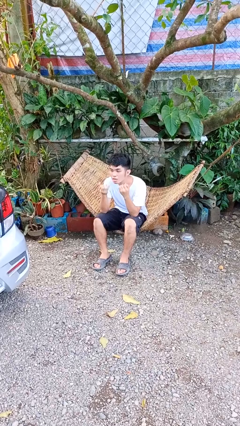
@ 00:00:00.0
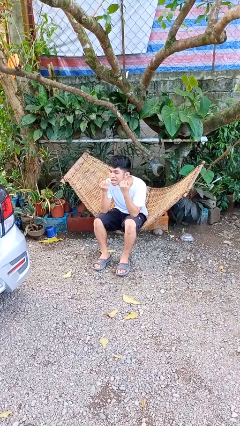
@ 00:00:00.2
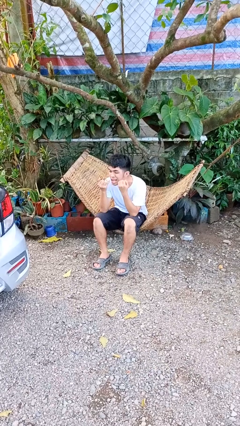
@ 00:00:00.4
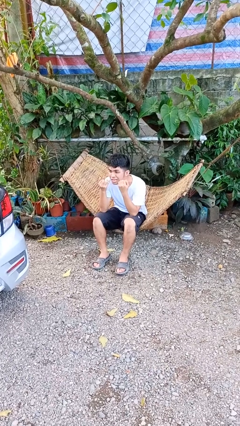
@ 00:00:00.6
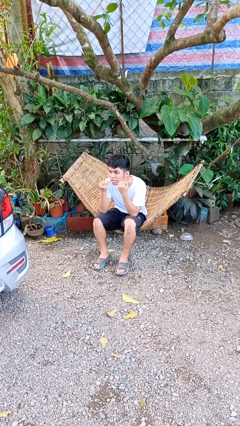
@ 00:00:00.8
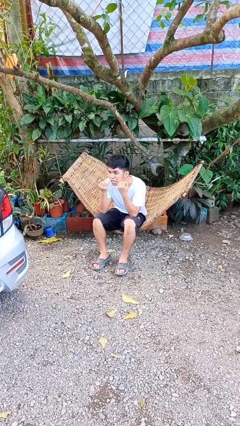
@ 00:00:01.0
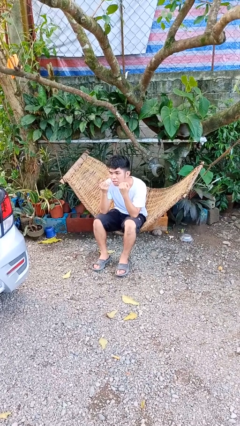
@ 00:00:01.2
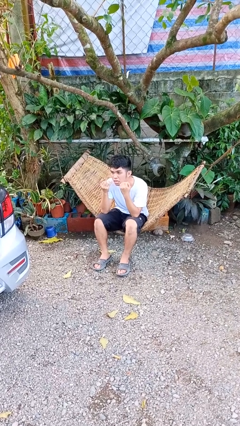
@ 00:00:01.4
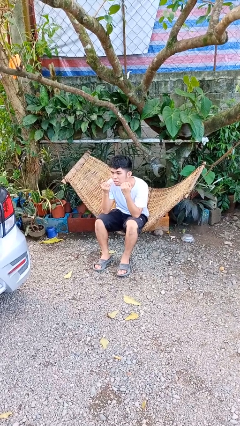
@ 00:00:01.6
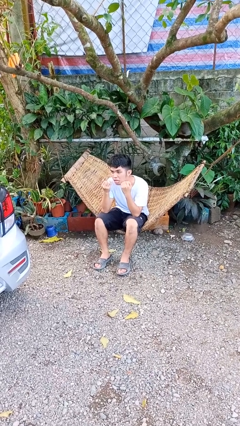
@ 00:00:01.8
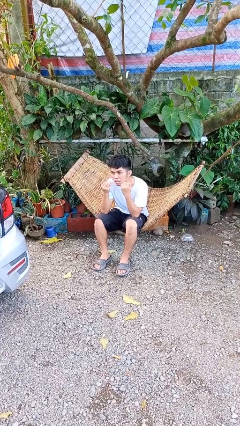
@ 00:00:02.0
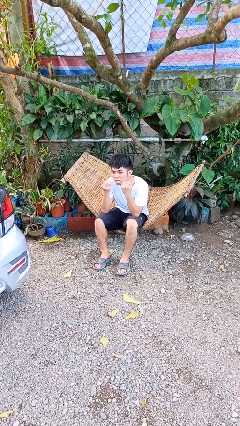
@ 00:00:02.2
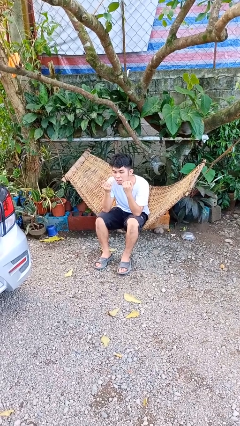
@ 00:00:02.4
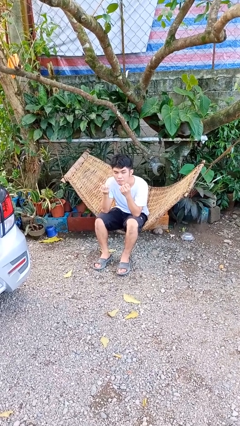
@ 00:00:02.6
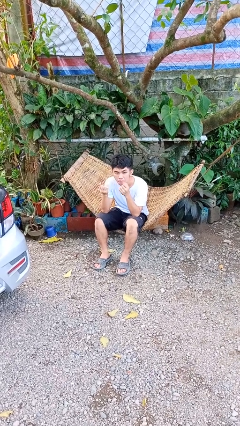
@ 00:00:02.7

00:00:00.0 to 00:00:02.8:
person flosses

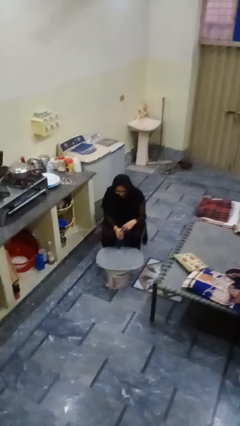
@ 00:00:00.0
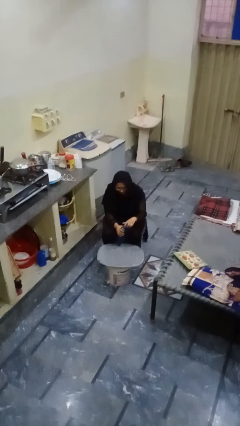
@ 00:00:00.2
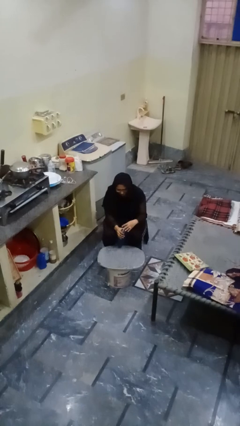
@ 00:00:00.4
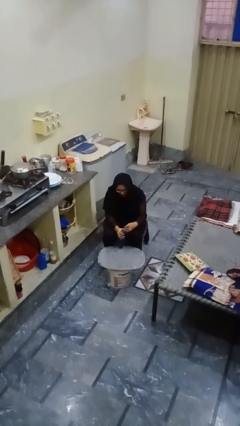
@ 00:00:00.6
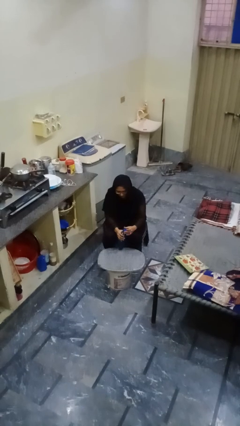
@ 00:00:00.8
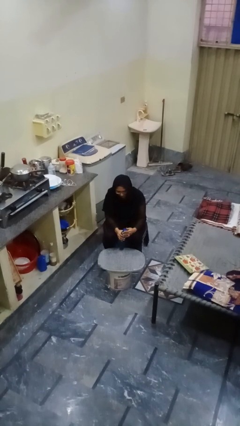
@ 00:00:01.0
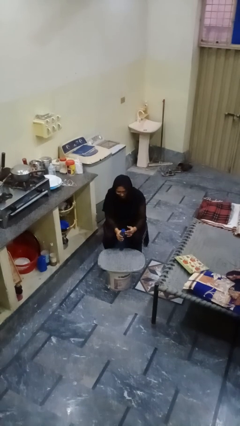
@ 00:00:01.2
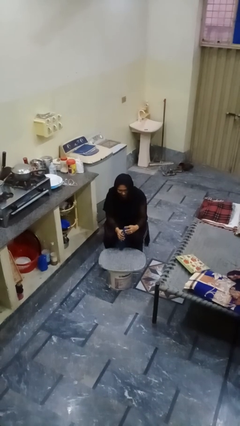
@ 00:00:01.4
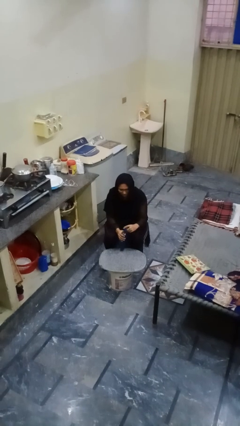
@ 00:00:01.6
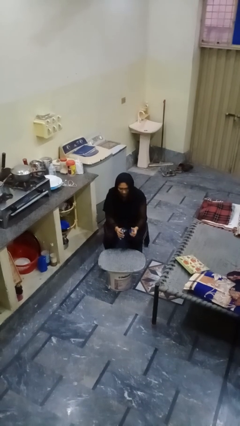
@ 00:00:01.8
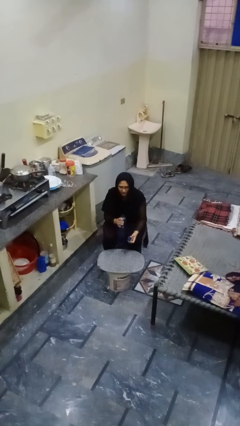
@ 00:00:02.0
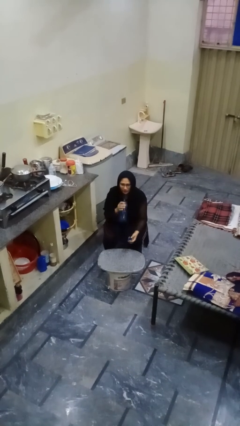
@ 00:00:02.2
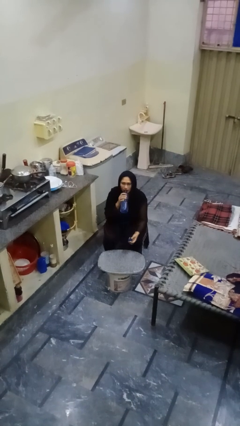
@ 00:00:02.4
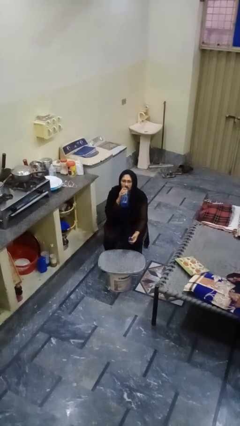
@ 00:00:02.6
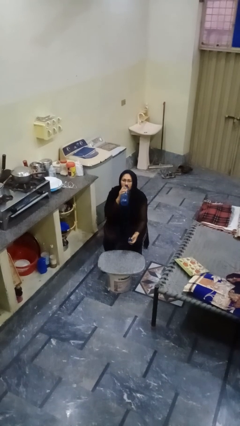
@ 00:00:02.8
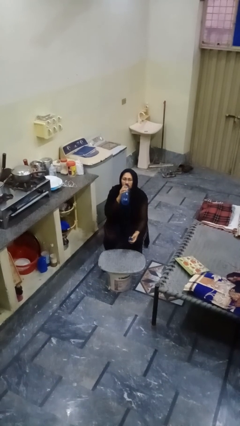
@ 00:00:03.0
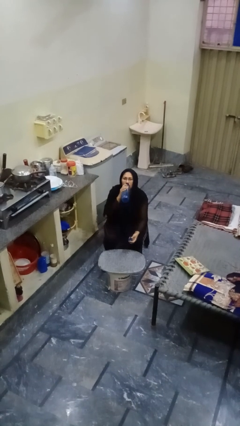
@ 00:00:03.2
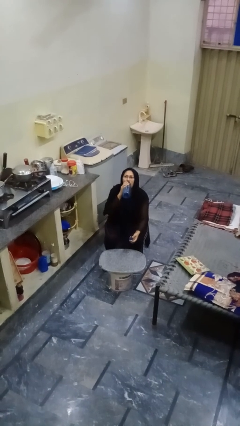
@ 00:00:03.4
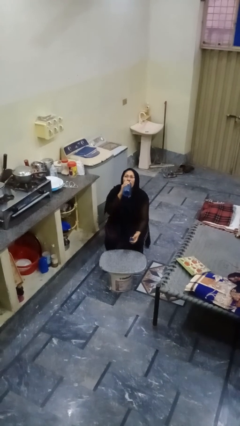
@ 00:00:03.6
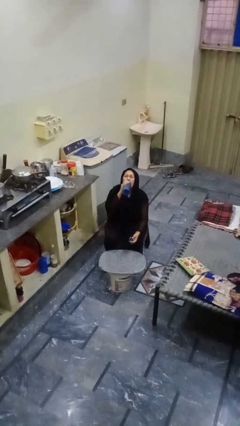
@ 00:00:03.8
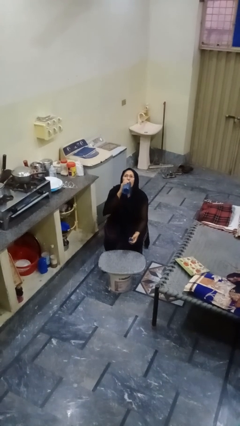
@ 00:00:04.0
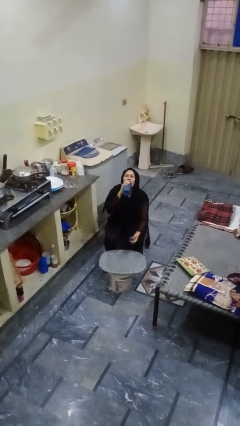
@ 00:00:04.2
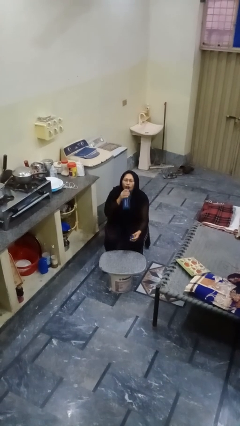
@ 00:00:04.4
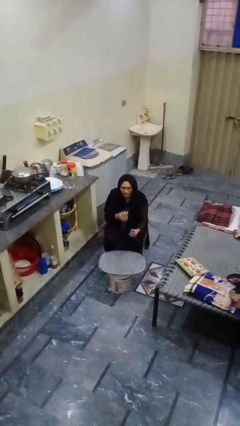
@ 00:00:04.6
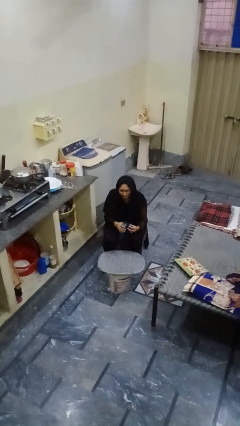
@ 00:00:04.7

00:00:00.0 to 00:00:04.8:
person drinks from bottle

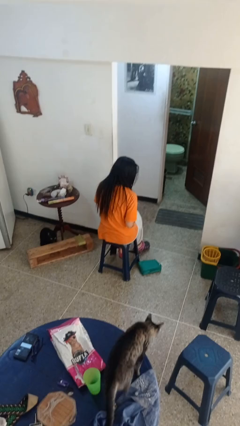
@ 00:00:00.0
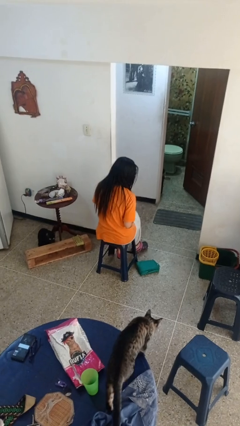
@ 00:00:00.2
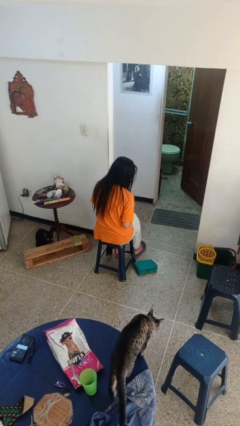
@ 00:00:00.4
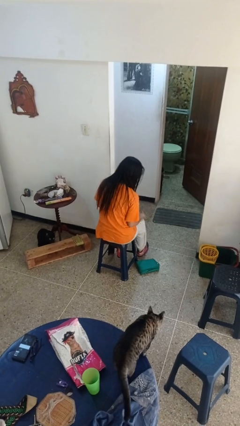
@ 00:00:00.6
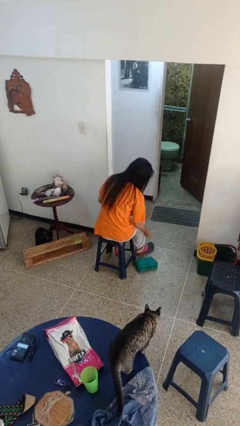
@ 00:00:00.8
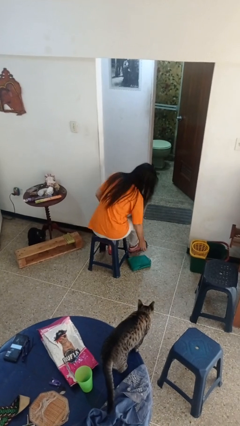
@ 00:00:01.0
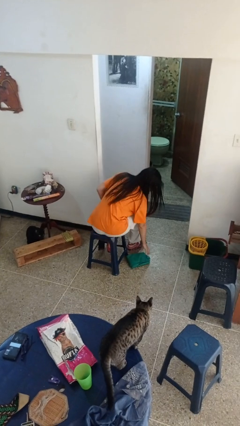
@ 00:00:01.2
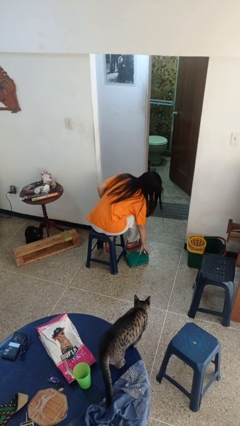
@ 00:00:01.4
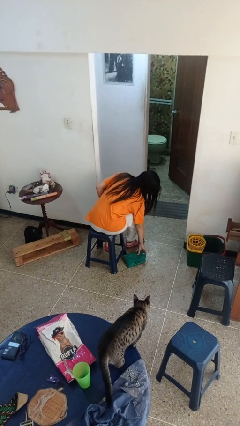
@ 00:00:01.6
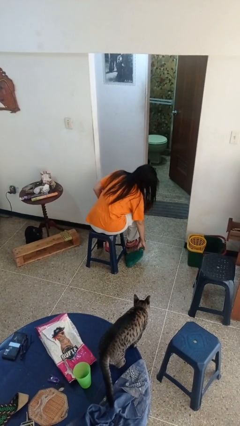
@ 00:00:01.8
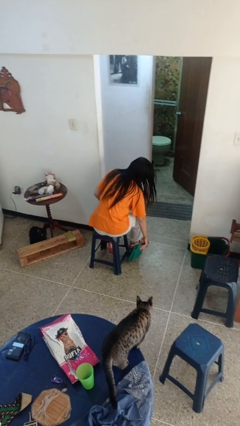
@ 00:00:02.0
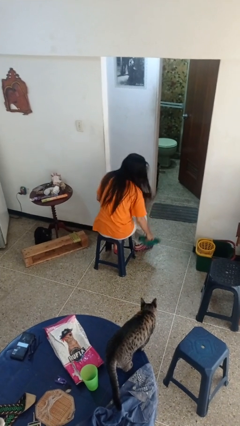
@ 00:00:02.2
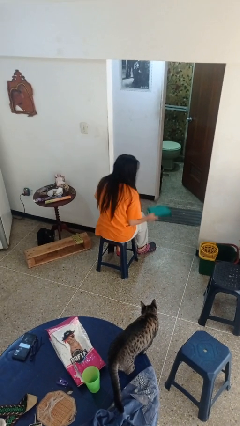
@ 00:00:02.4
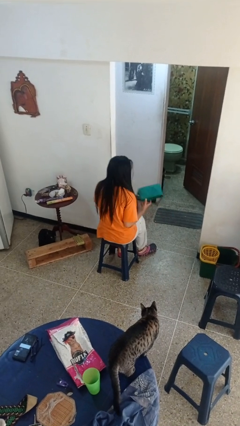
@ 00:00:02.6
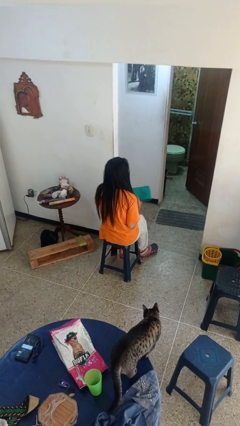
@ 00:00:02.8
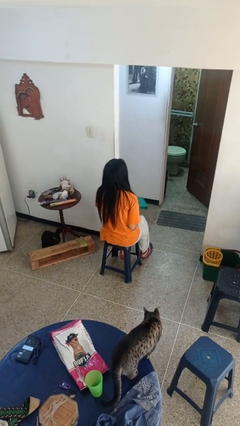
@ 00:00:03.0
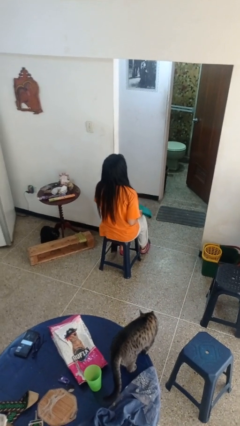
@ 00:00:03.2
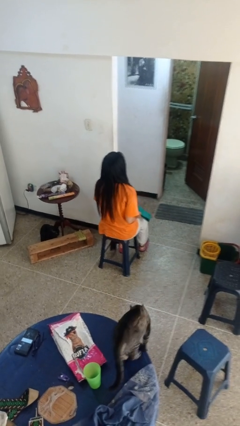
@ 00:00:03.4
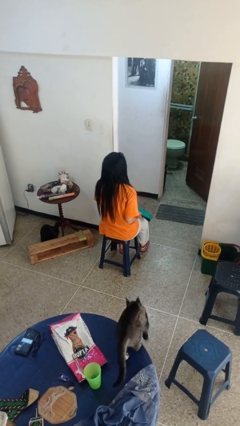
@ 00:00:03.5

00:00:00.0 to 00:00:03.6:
person picks up object from floor

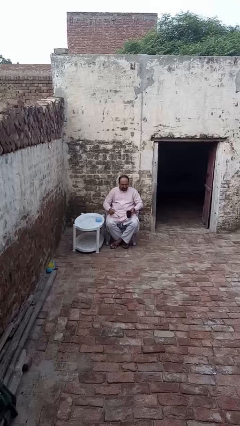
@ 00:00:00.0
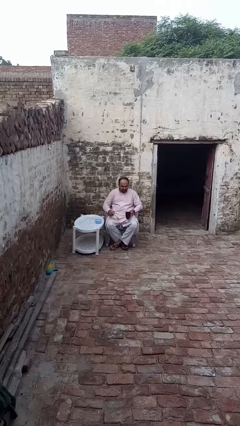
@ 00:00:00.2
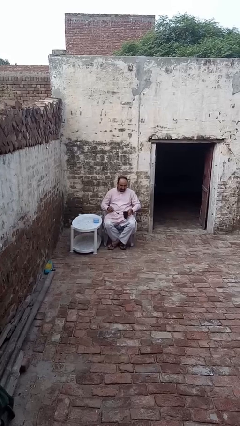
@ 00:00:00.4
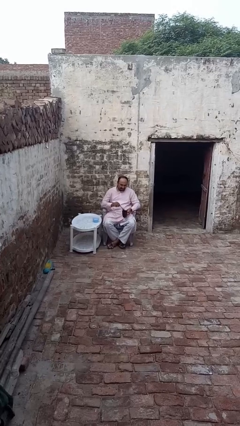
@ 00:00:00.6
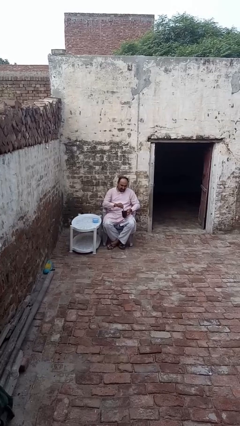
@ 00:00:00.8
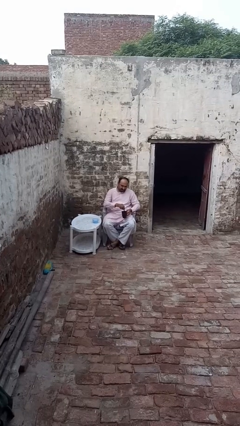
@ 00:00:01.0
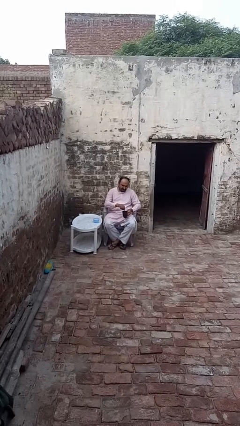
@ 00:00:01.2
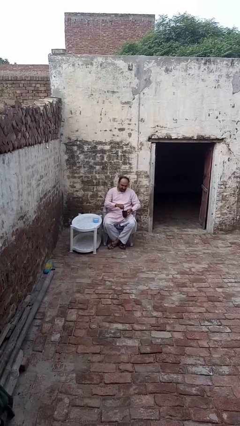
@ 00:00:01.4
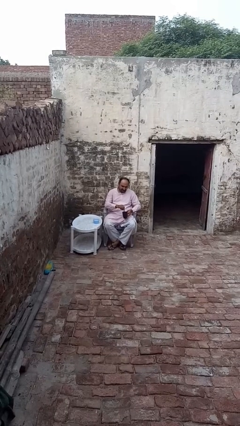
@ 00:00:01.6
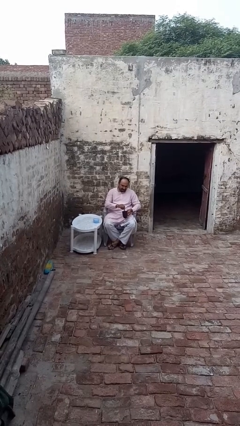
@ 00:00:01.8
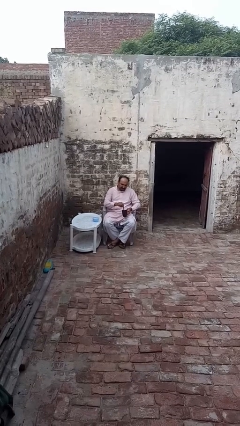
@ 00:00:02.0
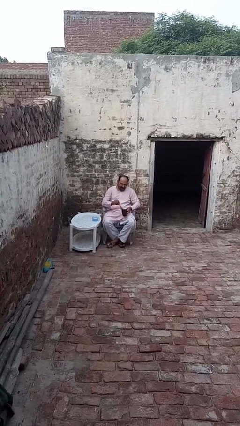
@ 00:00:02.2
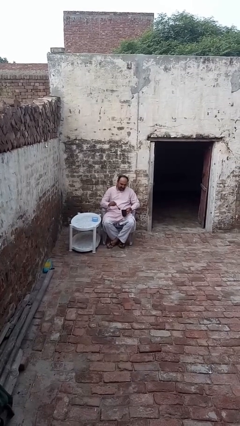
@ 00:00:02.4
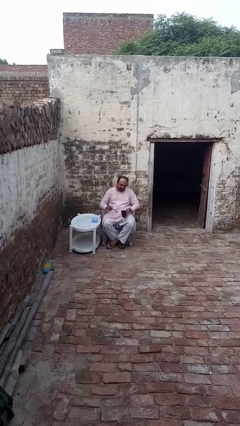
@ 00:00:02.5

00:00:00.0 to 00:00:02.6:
person stirs mug

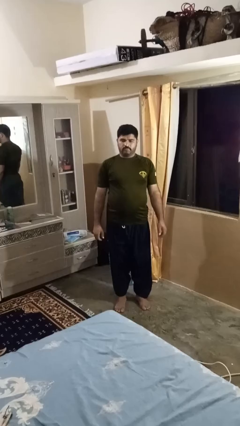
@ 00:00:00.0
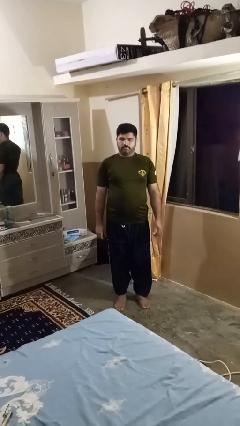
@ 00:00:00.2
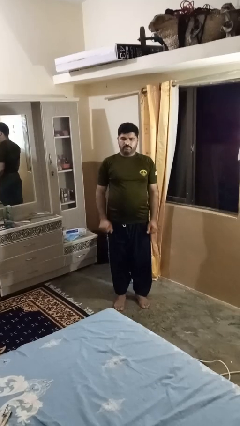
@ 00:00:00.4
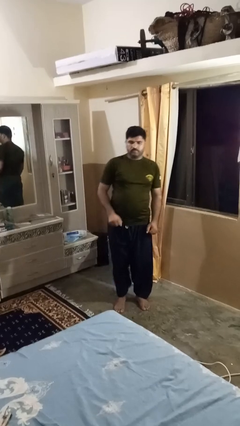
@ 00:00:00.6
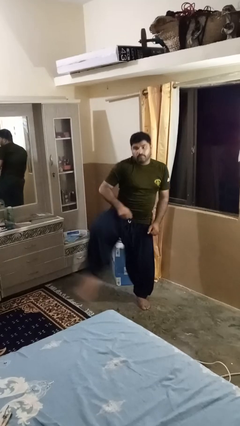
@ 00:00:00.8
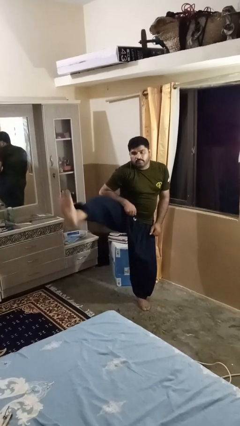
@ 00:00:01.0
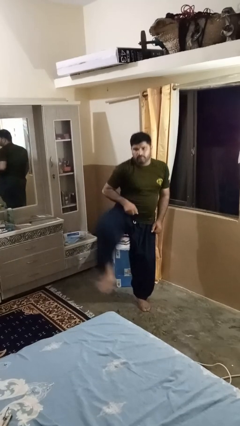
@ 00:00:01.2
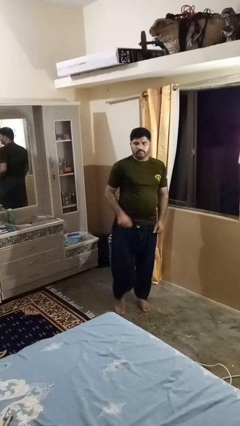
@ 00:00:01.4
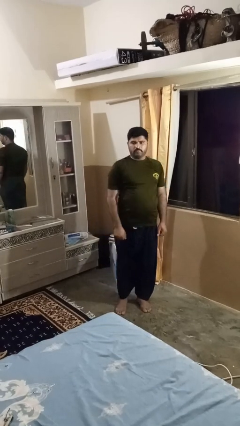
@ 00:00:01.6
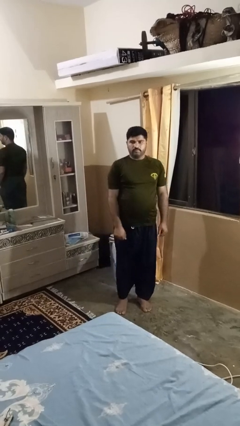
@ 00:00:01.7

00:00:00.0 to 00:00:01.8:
person karate kicks

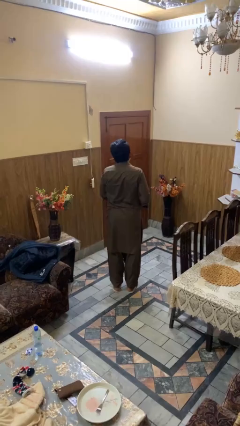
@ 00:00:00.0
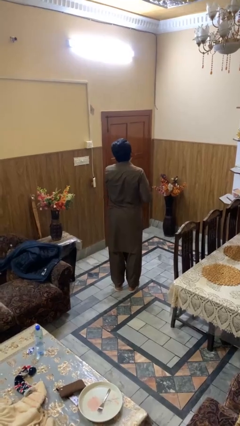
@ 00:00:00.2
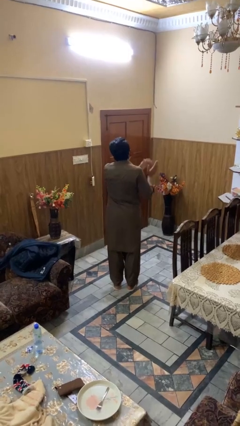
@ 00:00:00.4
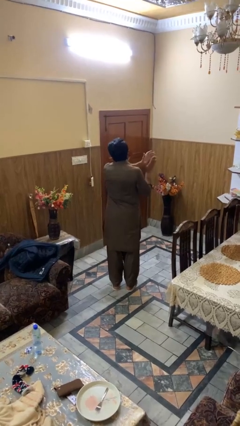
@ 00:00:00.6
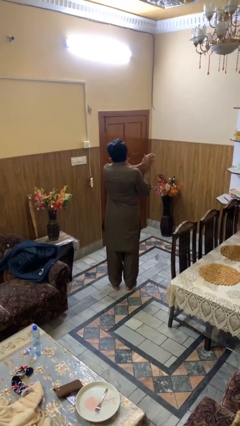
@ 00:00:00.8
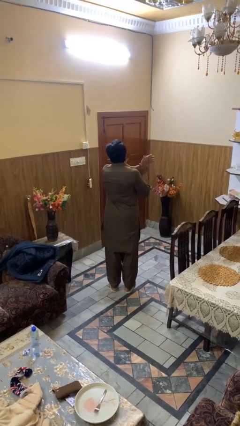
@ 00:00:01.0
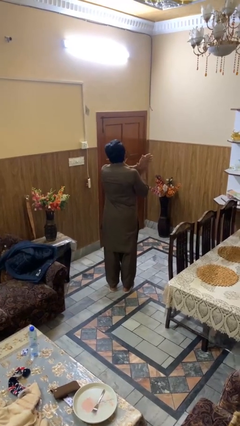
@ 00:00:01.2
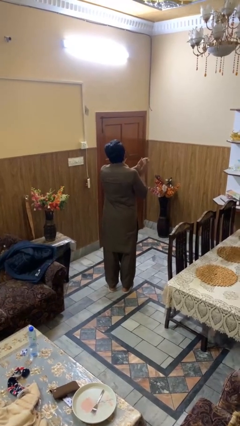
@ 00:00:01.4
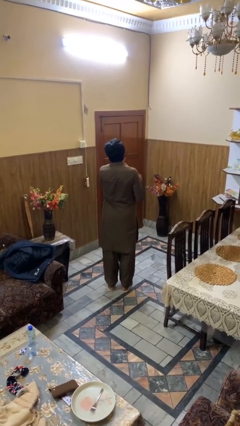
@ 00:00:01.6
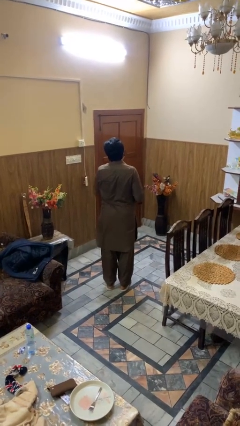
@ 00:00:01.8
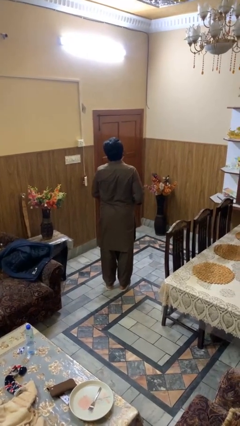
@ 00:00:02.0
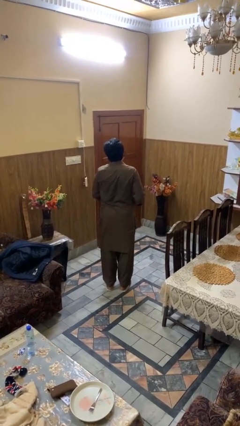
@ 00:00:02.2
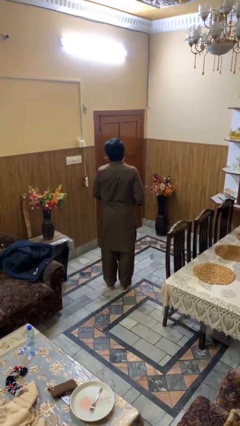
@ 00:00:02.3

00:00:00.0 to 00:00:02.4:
person claps hands
